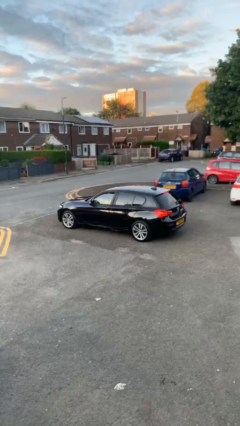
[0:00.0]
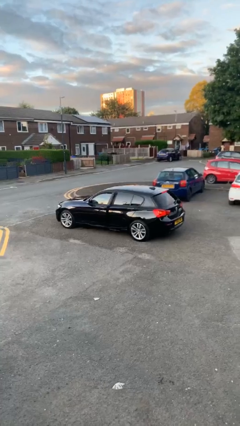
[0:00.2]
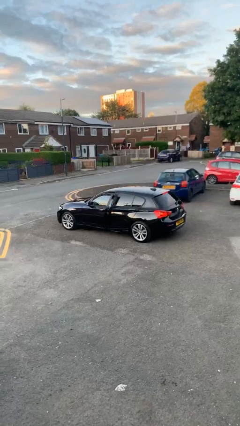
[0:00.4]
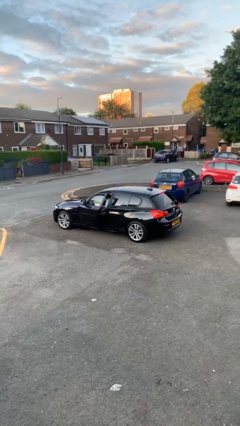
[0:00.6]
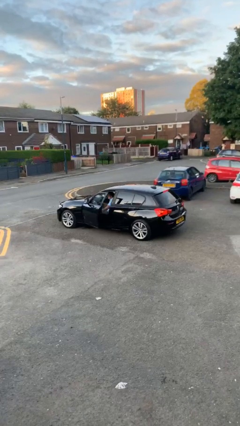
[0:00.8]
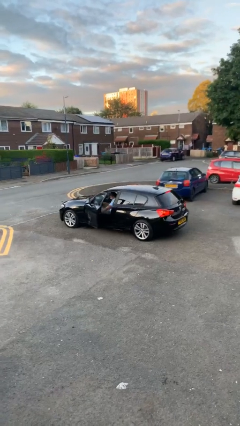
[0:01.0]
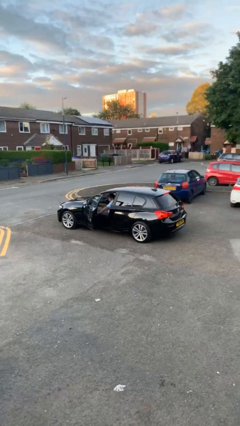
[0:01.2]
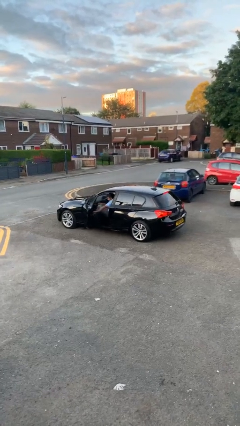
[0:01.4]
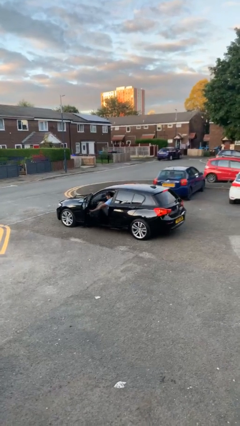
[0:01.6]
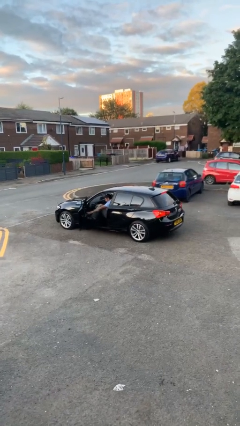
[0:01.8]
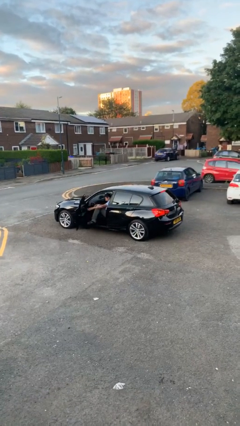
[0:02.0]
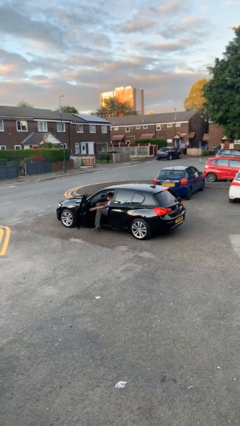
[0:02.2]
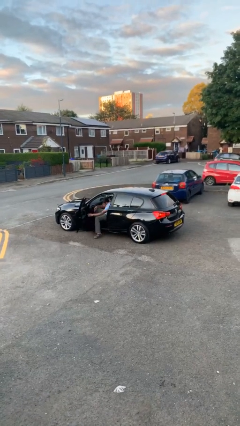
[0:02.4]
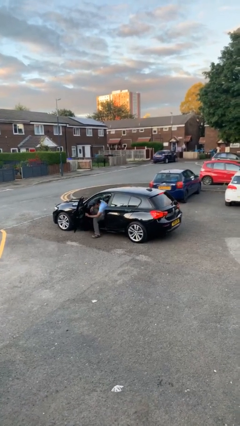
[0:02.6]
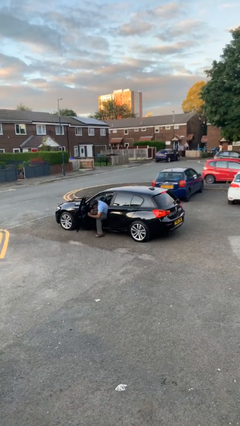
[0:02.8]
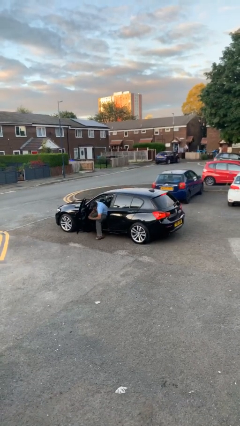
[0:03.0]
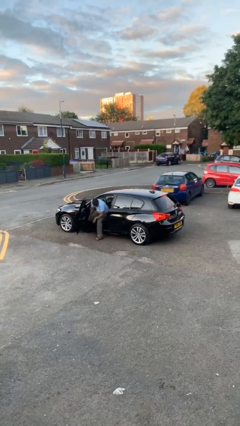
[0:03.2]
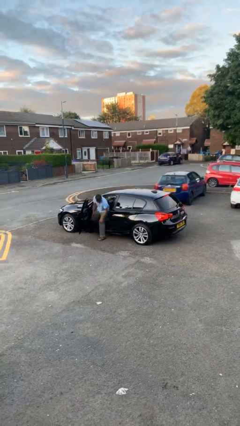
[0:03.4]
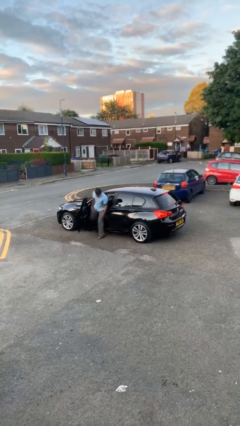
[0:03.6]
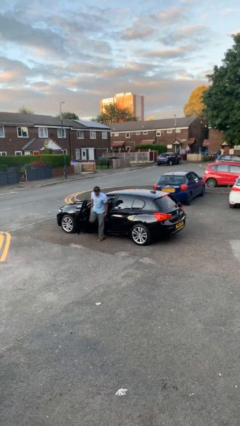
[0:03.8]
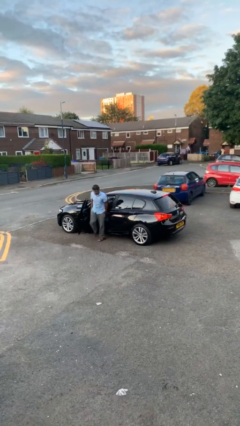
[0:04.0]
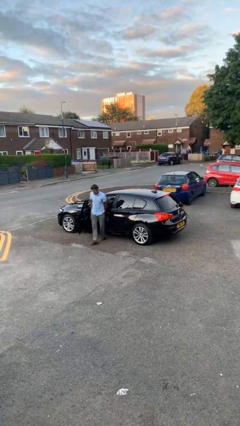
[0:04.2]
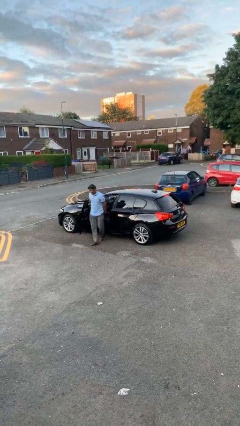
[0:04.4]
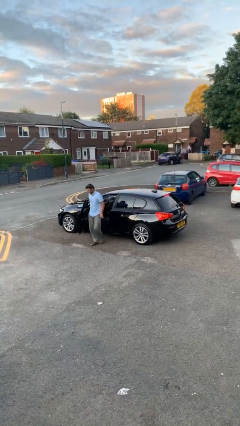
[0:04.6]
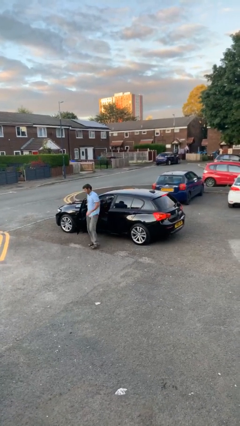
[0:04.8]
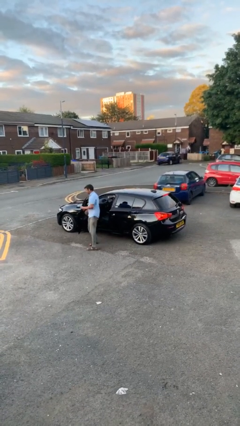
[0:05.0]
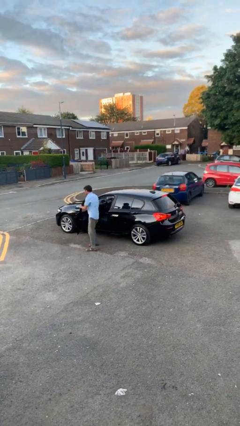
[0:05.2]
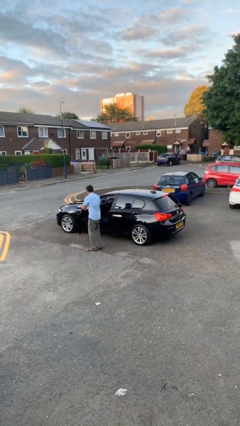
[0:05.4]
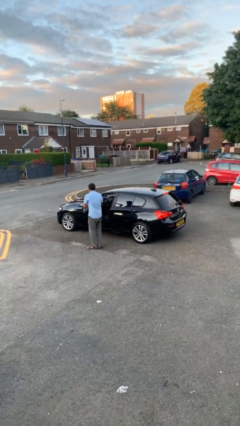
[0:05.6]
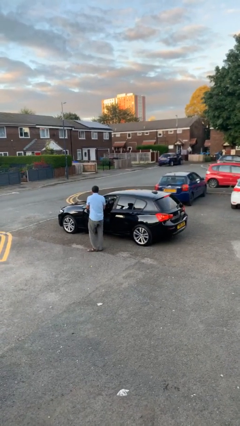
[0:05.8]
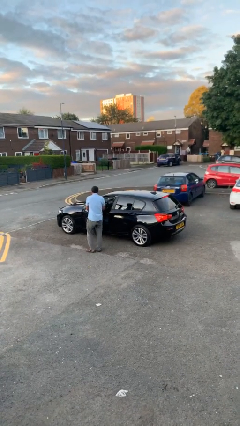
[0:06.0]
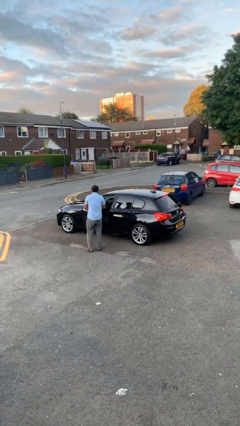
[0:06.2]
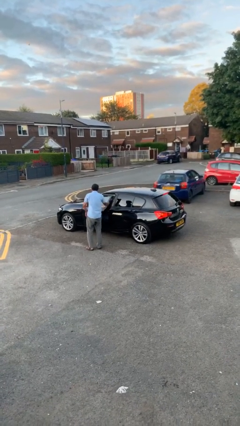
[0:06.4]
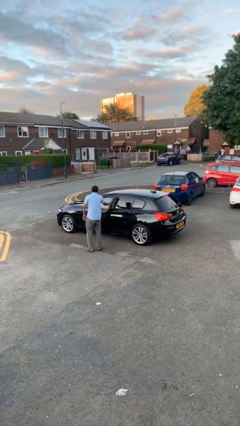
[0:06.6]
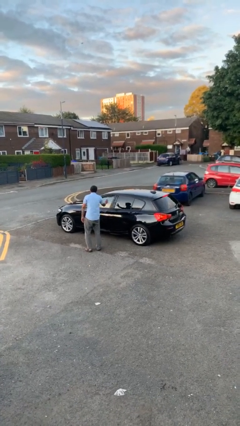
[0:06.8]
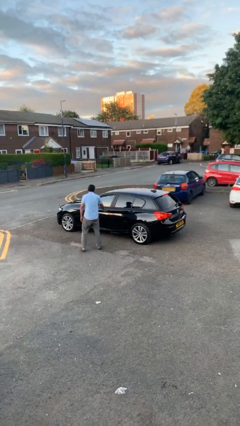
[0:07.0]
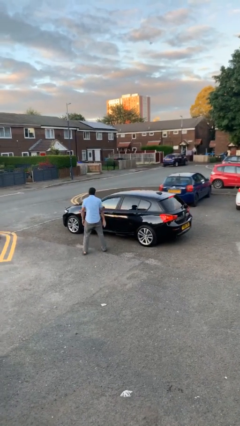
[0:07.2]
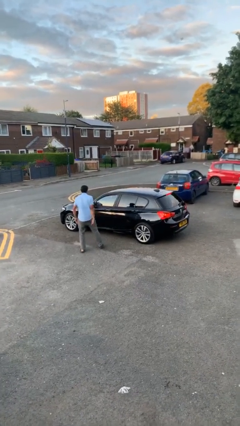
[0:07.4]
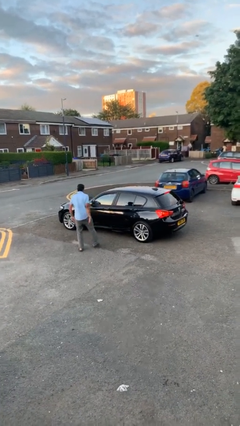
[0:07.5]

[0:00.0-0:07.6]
car drops off person

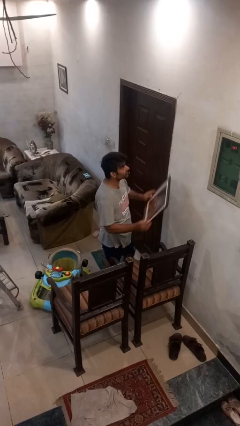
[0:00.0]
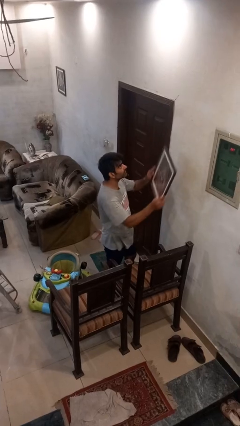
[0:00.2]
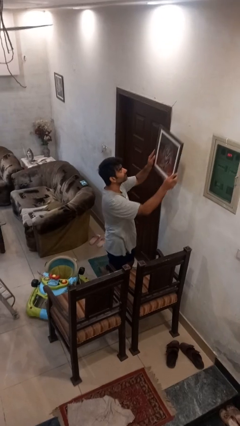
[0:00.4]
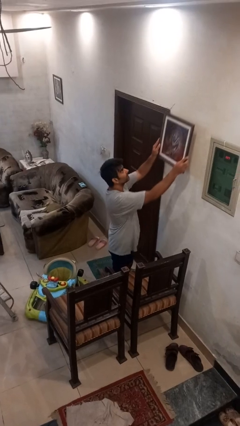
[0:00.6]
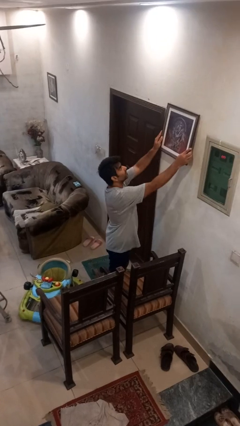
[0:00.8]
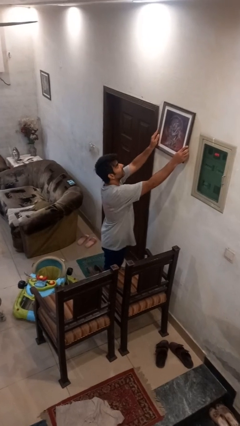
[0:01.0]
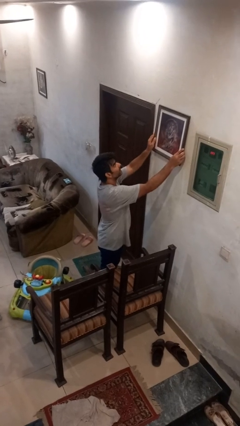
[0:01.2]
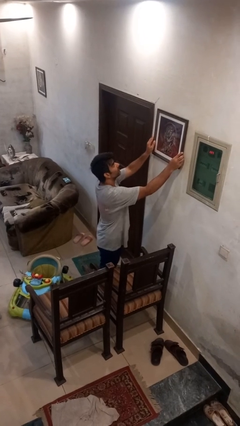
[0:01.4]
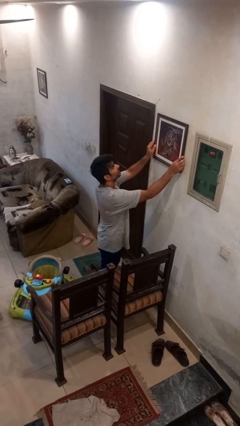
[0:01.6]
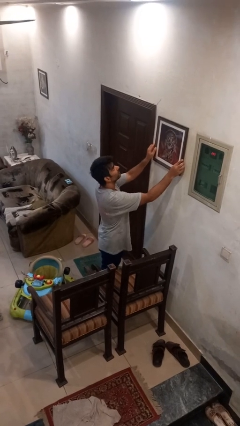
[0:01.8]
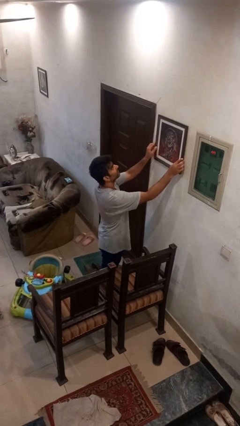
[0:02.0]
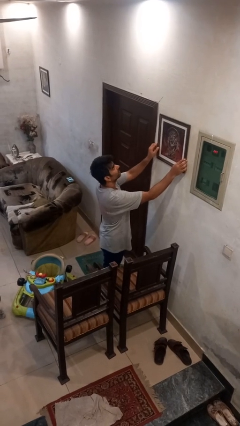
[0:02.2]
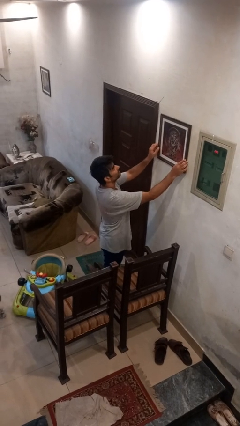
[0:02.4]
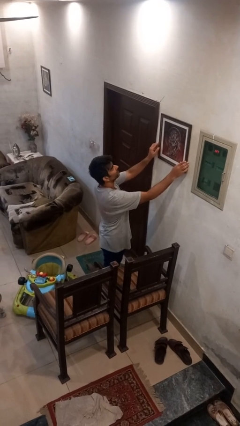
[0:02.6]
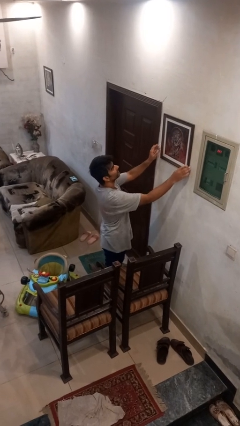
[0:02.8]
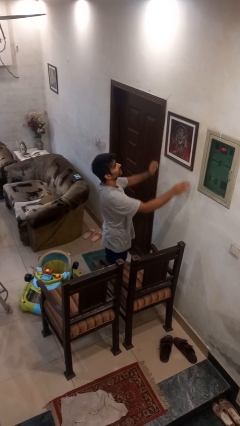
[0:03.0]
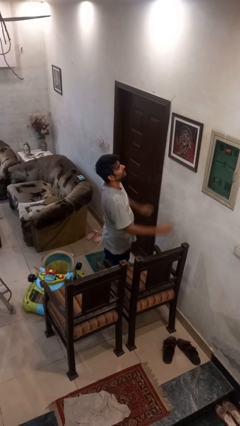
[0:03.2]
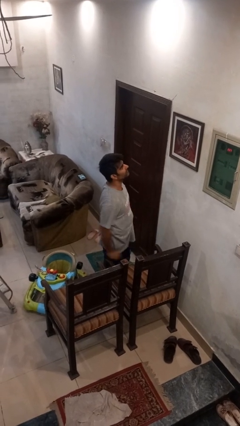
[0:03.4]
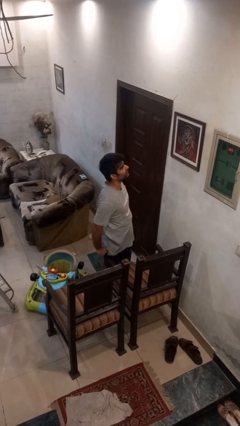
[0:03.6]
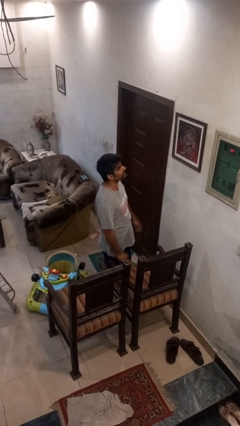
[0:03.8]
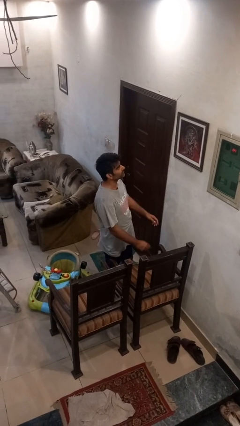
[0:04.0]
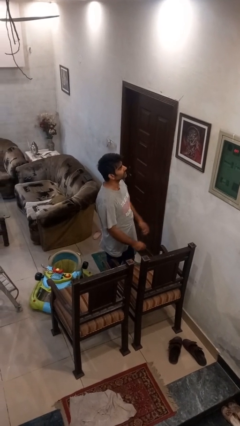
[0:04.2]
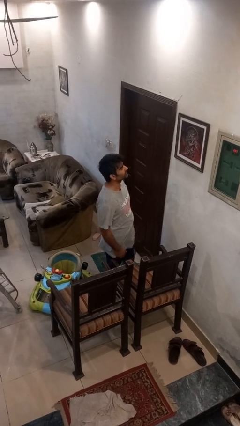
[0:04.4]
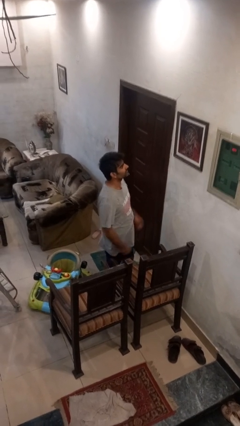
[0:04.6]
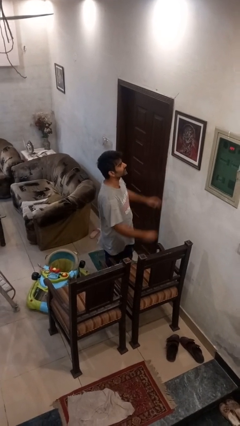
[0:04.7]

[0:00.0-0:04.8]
person puts up picture frame

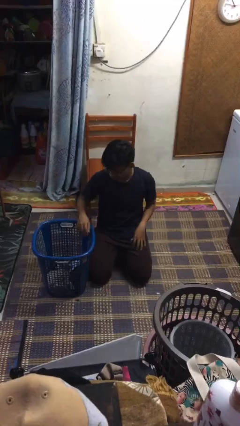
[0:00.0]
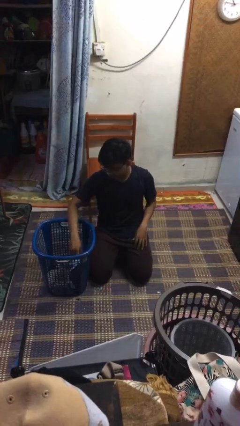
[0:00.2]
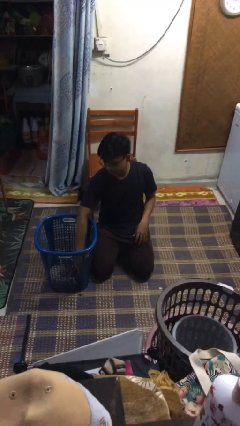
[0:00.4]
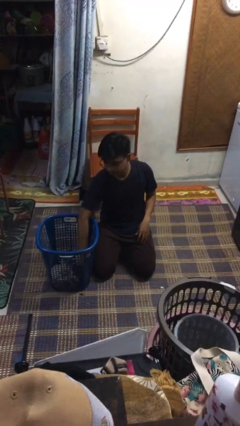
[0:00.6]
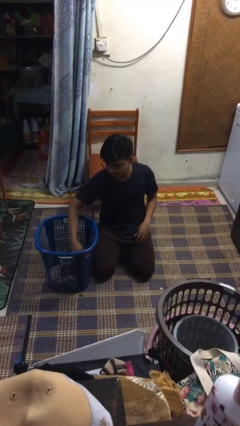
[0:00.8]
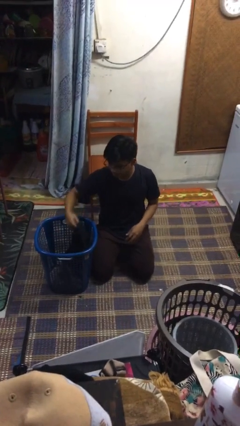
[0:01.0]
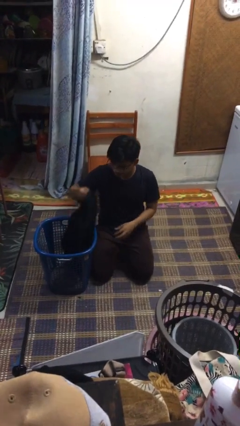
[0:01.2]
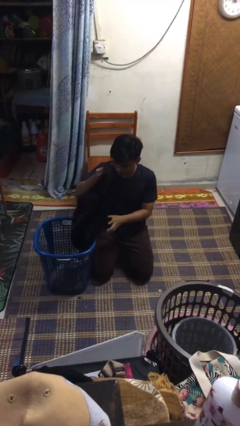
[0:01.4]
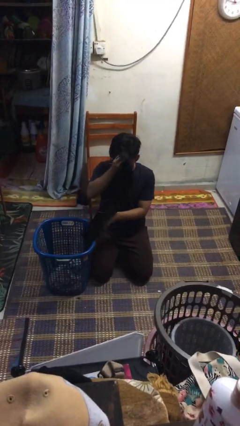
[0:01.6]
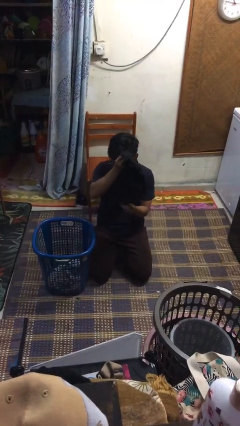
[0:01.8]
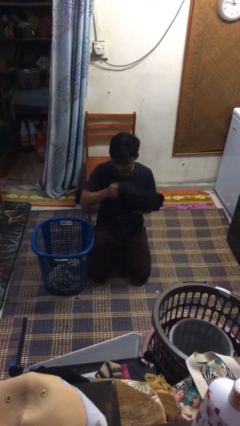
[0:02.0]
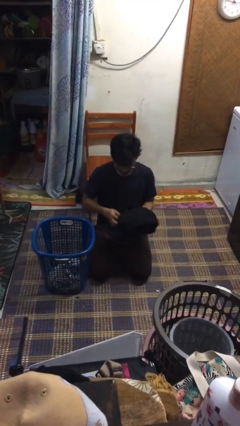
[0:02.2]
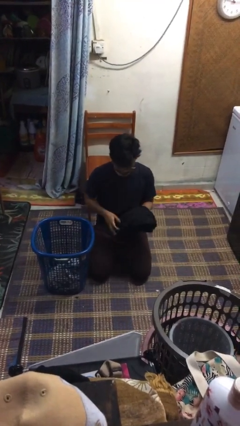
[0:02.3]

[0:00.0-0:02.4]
person takes object from basket

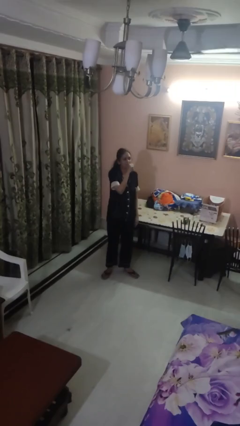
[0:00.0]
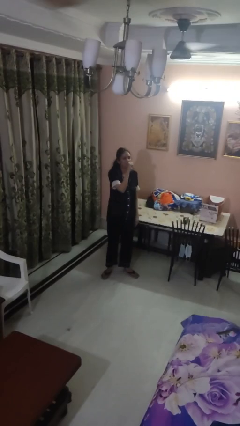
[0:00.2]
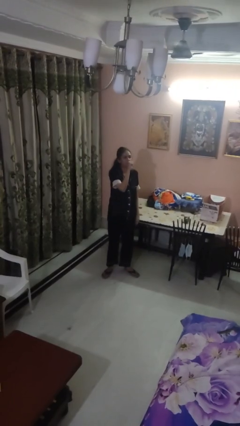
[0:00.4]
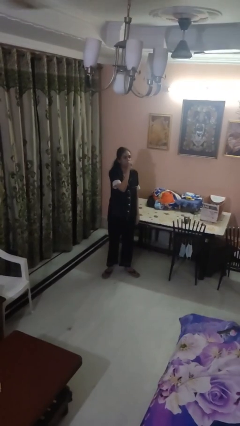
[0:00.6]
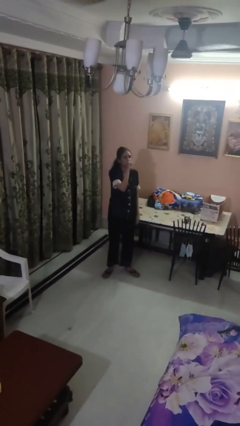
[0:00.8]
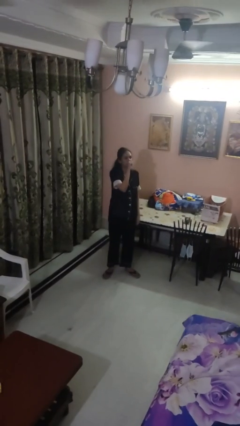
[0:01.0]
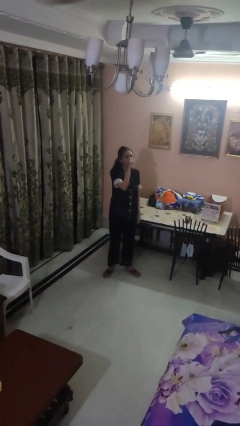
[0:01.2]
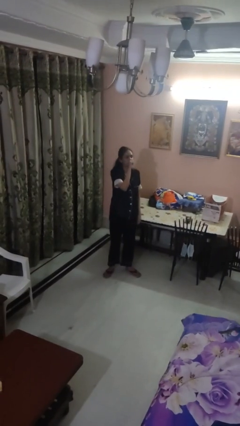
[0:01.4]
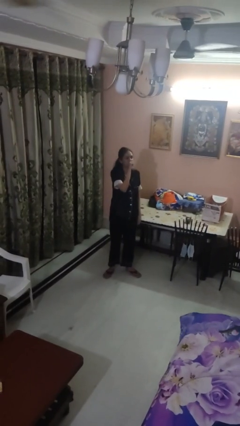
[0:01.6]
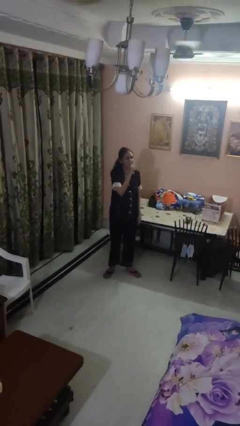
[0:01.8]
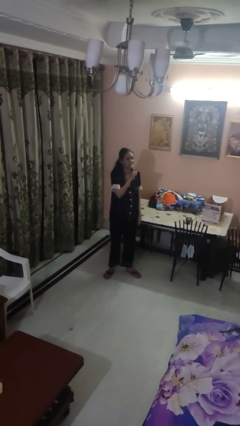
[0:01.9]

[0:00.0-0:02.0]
person vapes

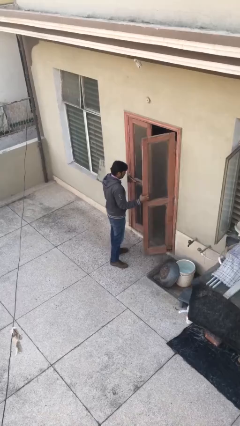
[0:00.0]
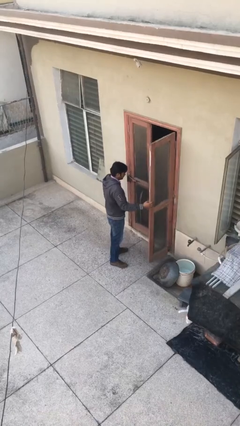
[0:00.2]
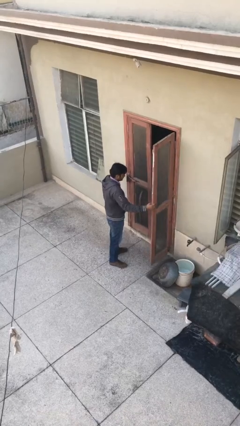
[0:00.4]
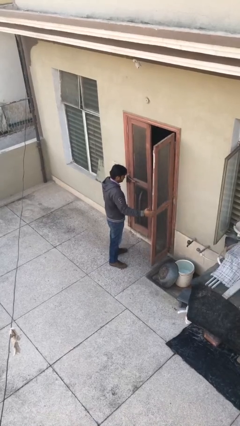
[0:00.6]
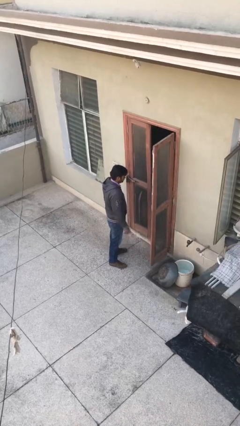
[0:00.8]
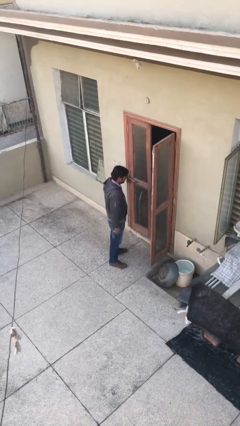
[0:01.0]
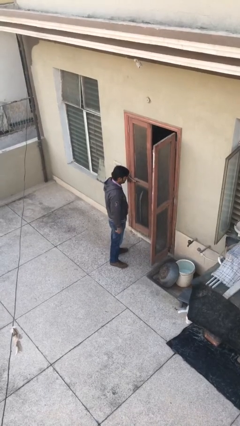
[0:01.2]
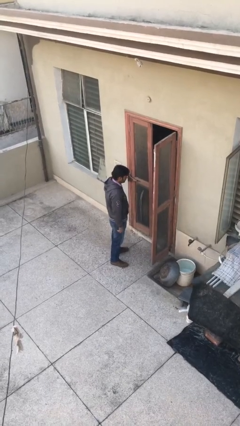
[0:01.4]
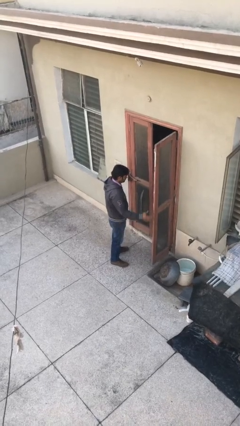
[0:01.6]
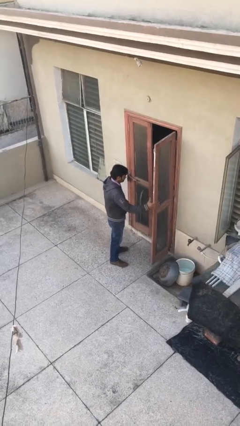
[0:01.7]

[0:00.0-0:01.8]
person opens facility door
